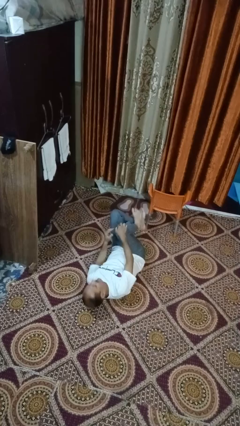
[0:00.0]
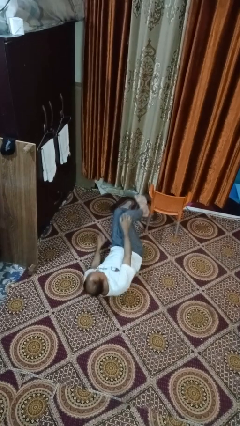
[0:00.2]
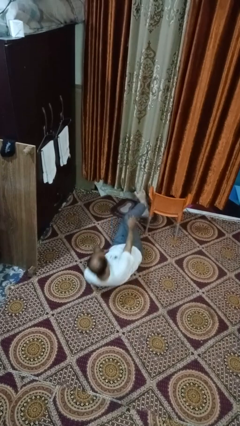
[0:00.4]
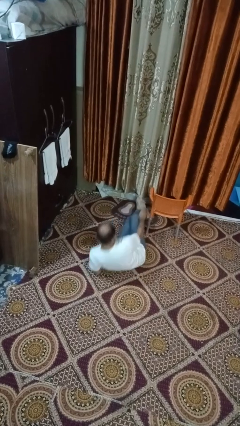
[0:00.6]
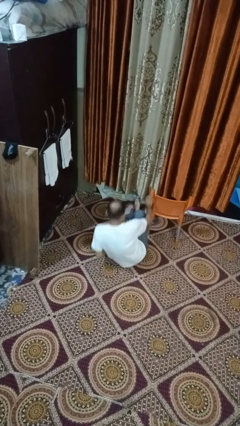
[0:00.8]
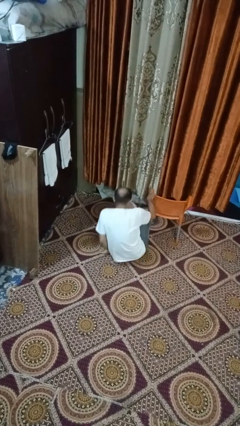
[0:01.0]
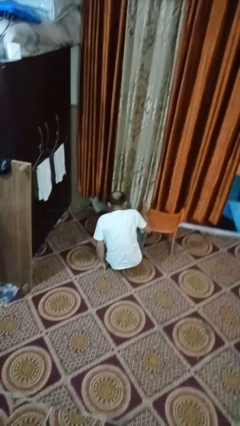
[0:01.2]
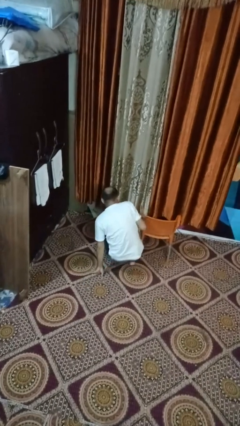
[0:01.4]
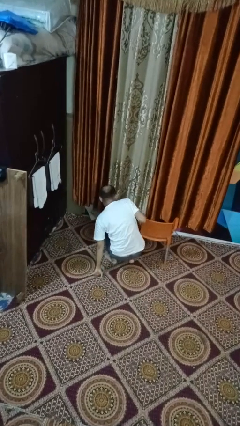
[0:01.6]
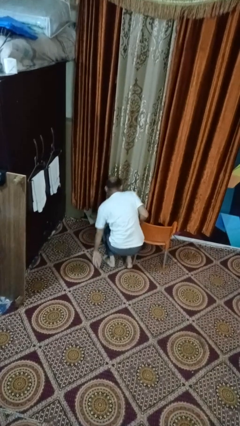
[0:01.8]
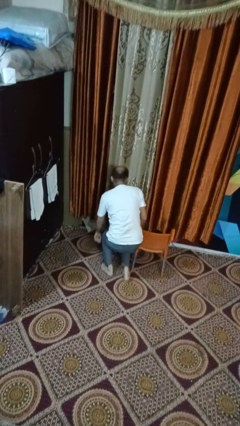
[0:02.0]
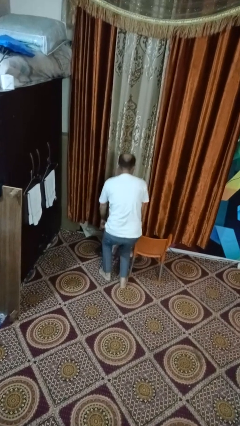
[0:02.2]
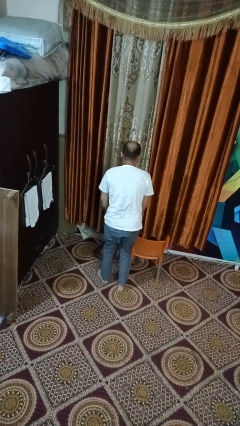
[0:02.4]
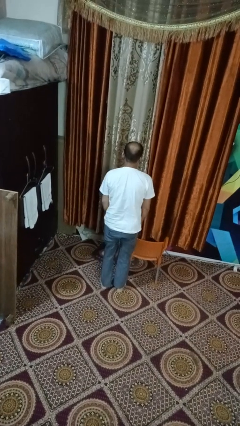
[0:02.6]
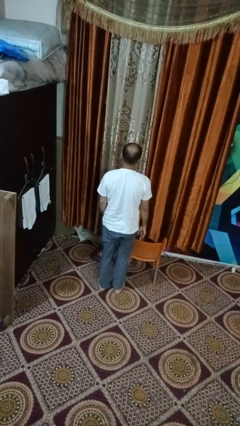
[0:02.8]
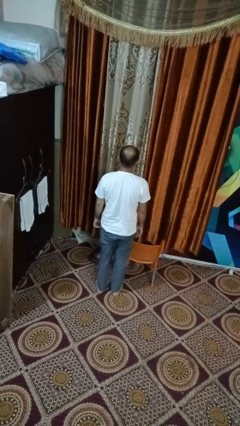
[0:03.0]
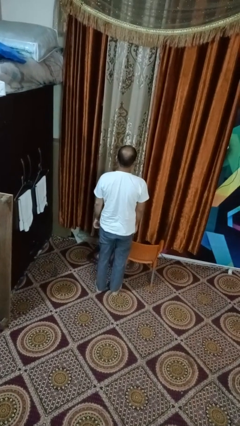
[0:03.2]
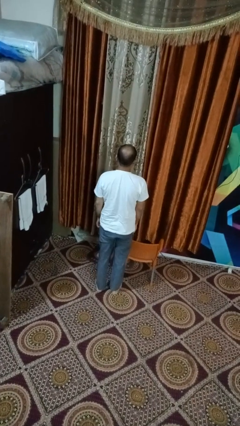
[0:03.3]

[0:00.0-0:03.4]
person stands up from floor

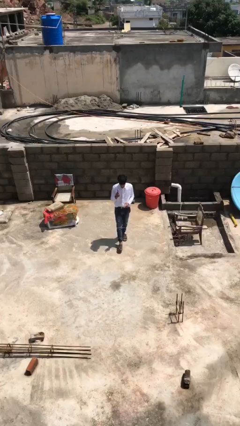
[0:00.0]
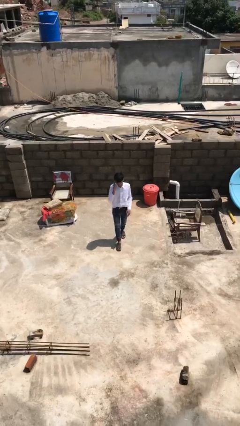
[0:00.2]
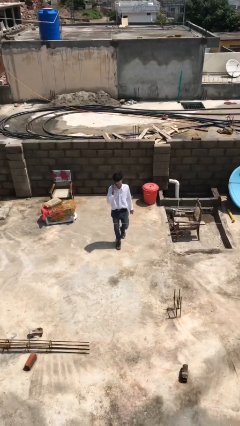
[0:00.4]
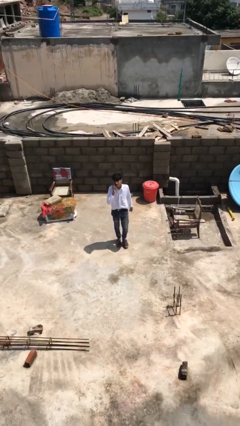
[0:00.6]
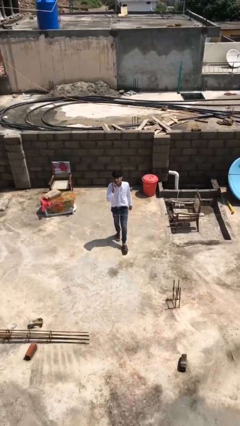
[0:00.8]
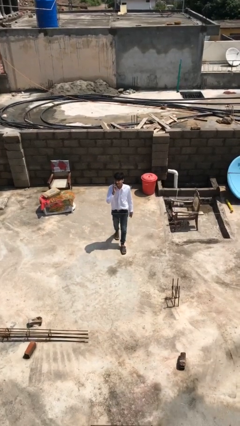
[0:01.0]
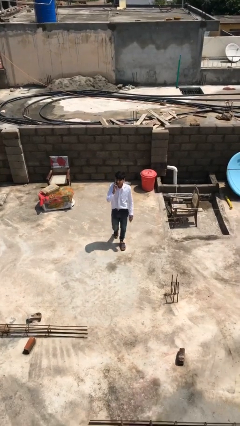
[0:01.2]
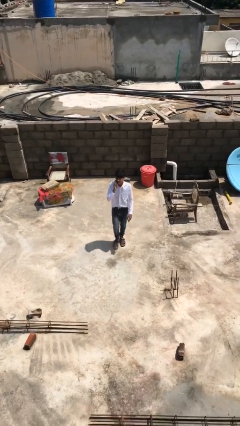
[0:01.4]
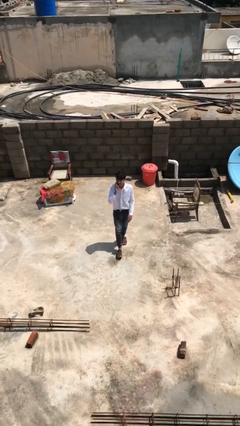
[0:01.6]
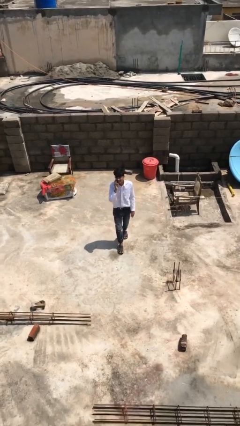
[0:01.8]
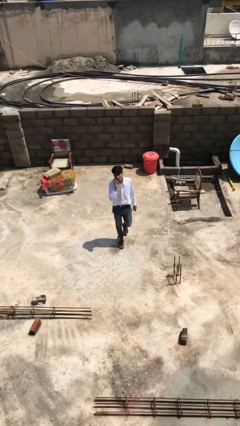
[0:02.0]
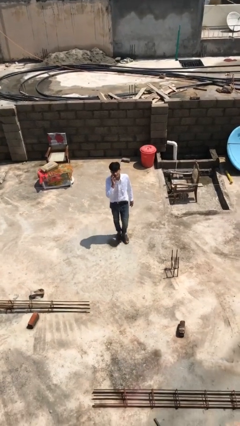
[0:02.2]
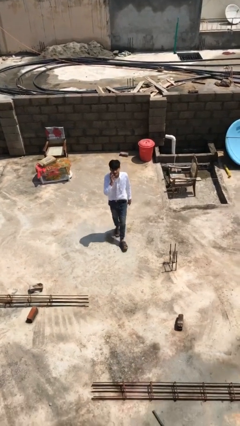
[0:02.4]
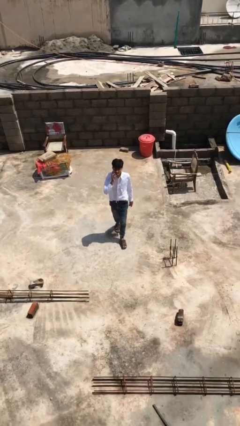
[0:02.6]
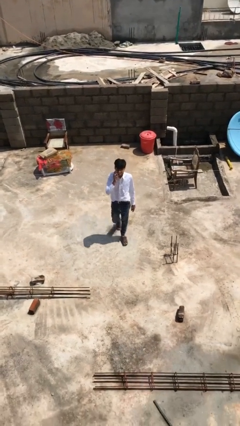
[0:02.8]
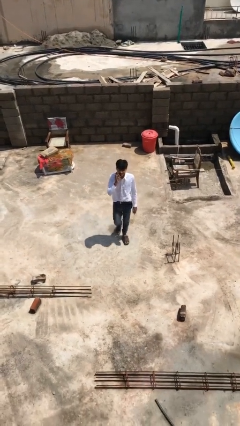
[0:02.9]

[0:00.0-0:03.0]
person talks on phone

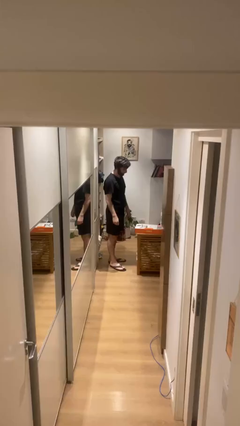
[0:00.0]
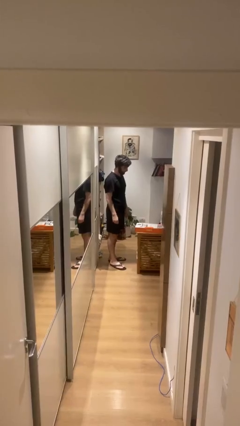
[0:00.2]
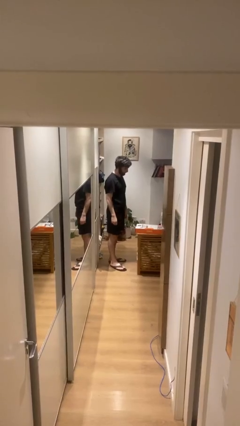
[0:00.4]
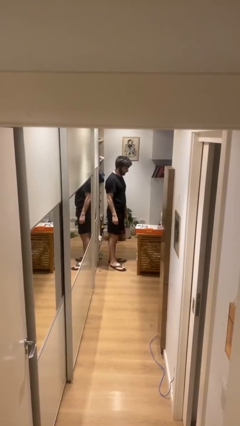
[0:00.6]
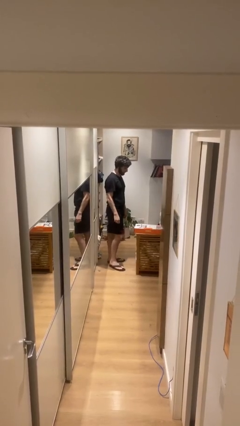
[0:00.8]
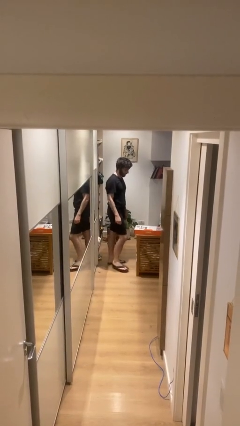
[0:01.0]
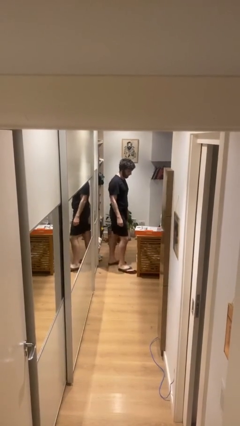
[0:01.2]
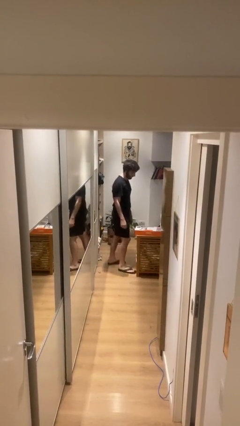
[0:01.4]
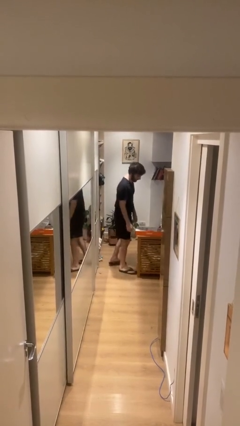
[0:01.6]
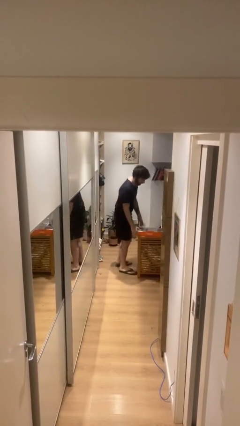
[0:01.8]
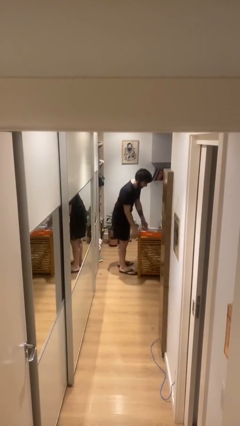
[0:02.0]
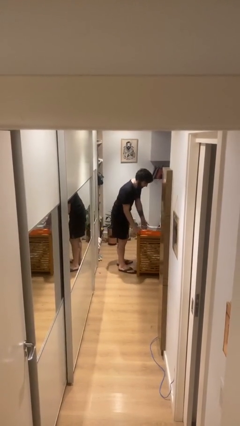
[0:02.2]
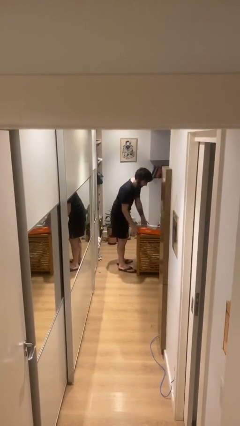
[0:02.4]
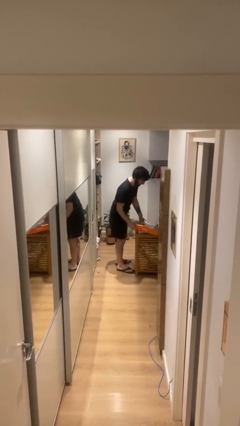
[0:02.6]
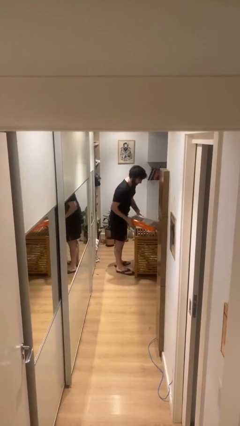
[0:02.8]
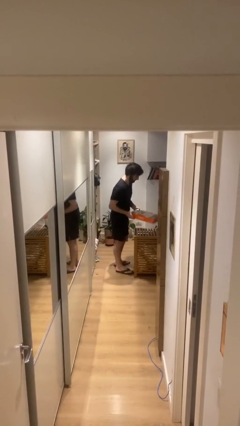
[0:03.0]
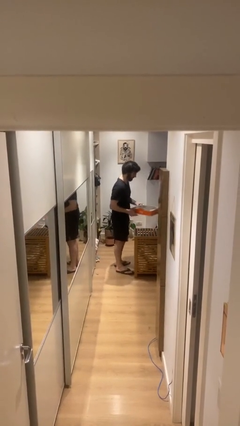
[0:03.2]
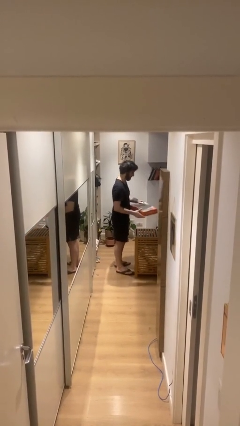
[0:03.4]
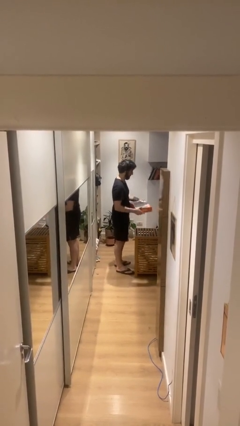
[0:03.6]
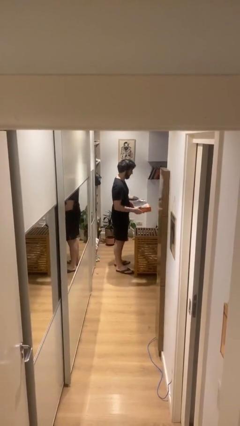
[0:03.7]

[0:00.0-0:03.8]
person picks up object from table

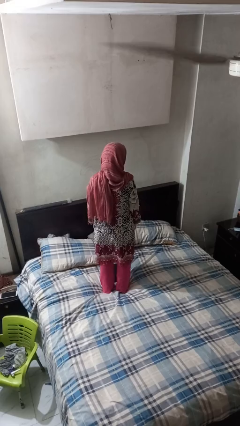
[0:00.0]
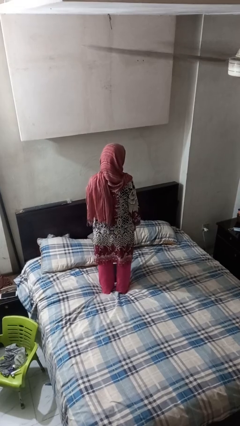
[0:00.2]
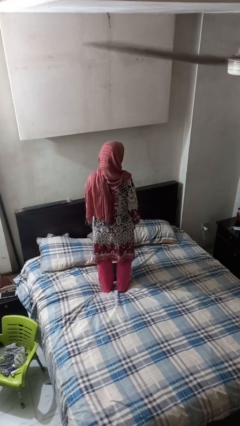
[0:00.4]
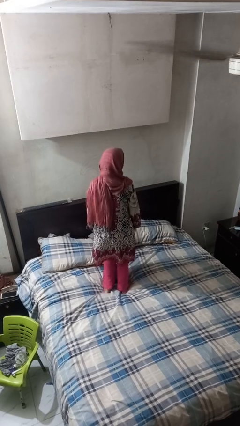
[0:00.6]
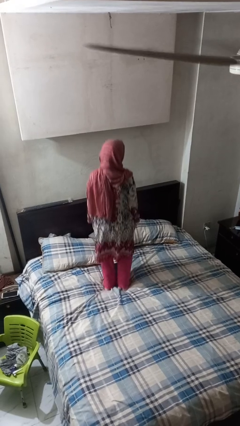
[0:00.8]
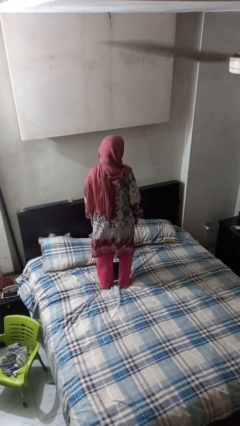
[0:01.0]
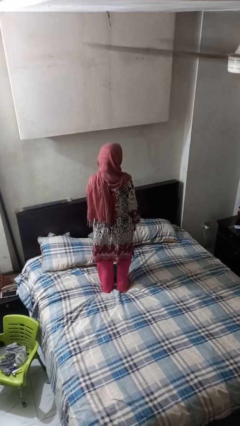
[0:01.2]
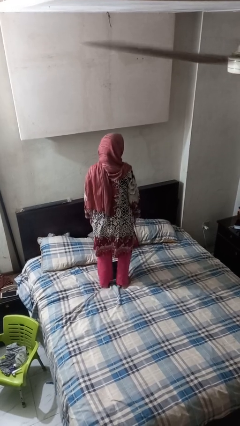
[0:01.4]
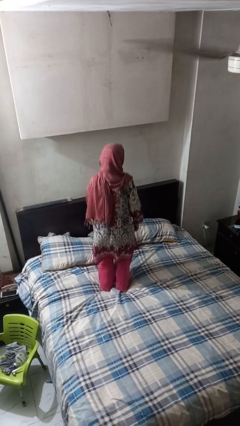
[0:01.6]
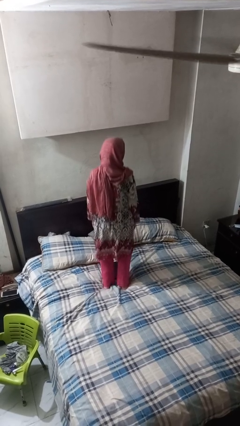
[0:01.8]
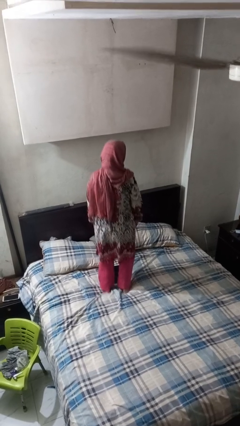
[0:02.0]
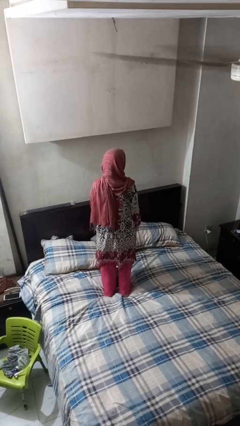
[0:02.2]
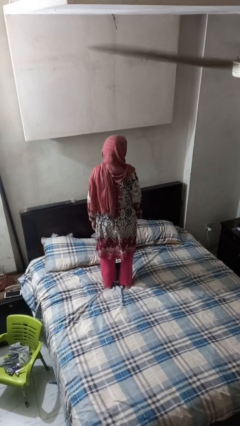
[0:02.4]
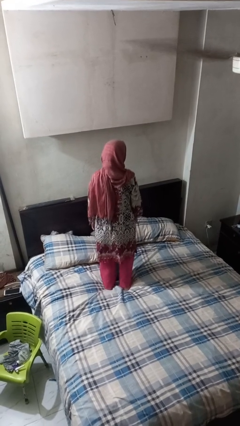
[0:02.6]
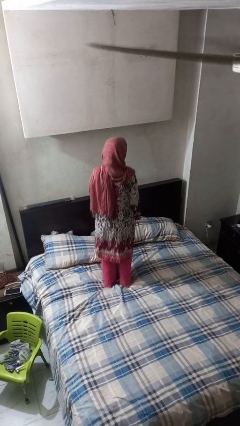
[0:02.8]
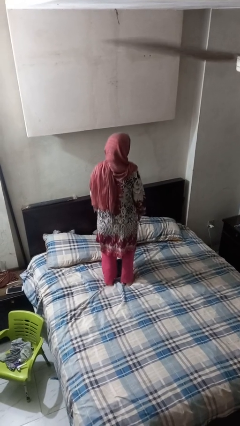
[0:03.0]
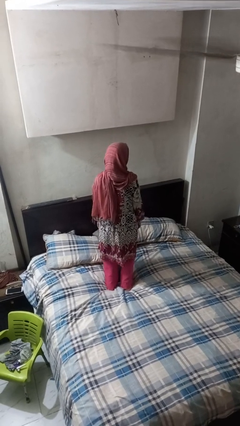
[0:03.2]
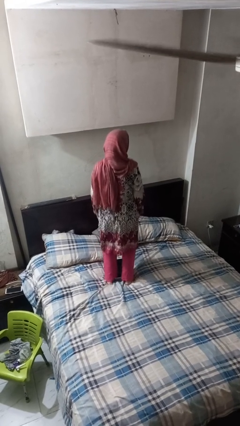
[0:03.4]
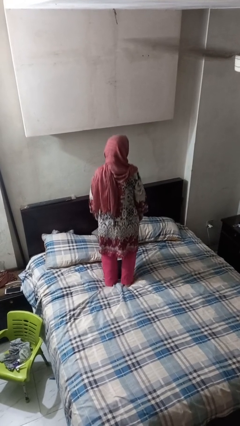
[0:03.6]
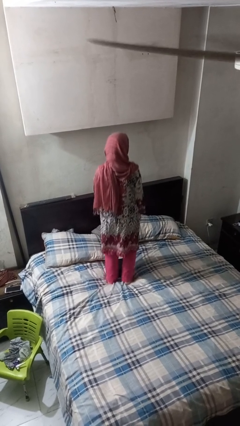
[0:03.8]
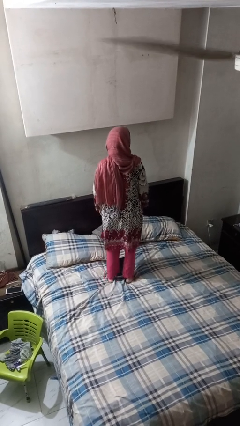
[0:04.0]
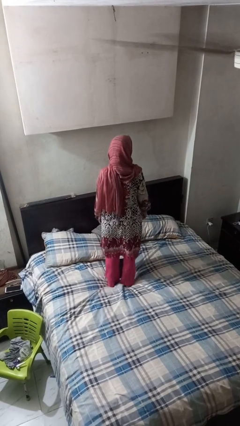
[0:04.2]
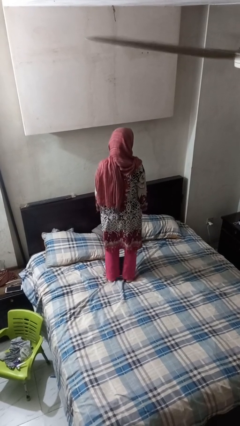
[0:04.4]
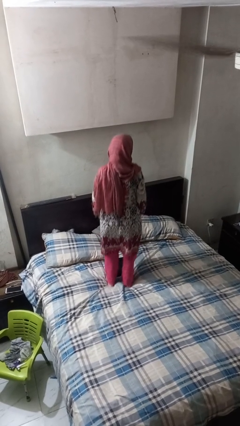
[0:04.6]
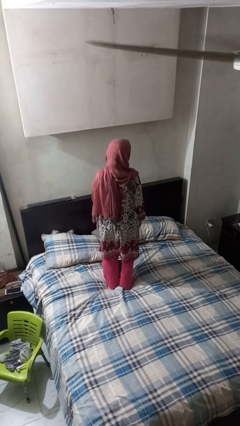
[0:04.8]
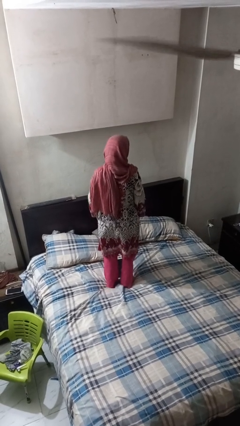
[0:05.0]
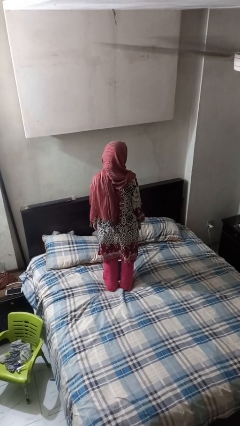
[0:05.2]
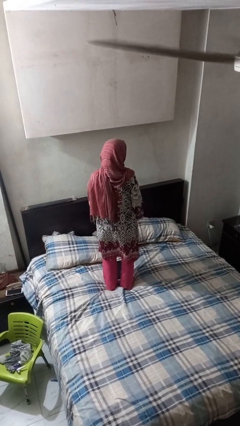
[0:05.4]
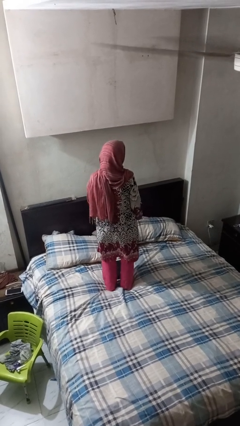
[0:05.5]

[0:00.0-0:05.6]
person jumps on bed

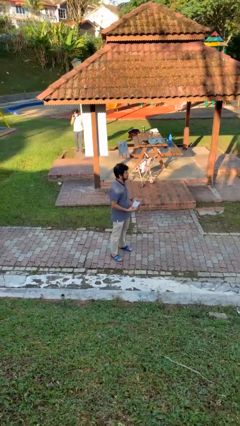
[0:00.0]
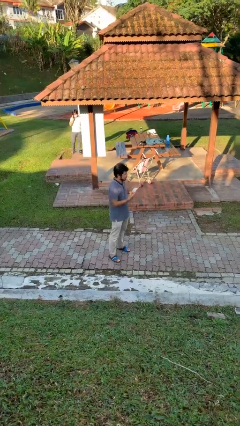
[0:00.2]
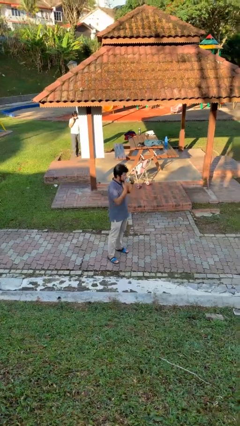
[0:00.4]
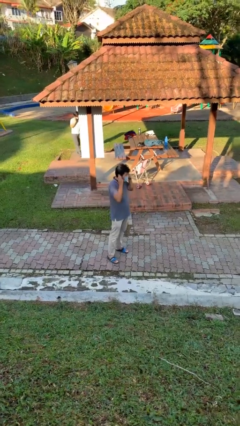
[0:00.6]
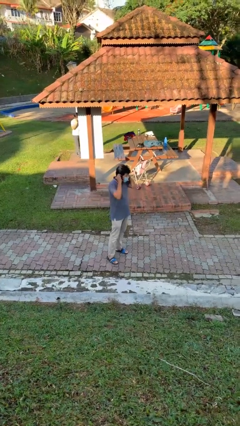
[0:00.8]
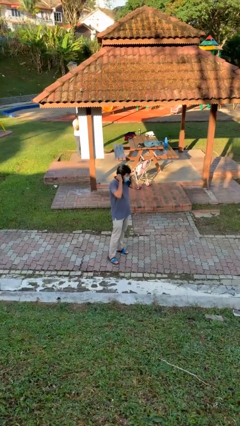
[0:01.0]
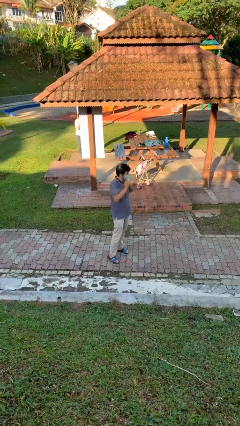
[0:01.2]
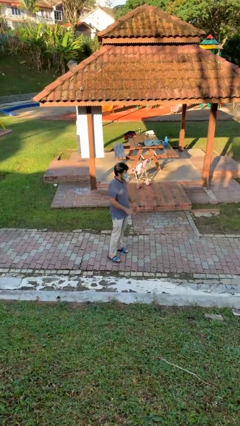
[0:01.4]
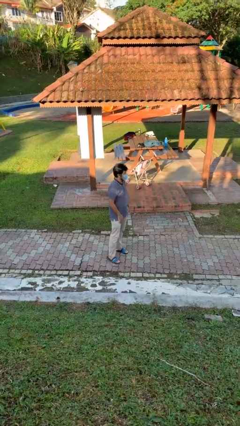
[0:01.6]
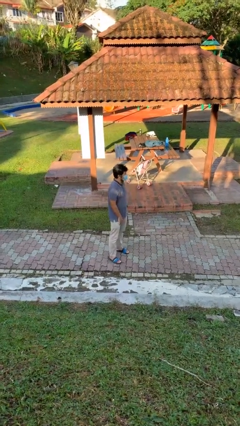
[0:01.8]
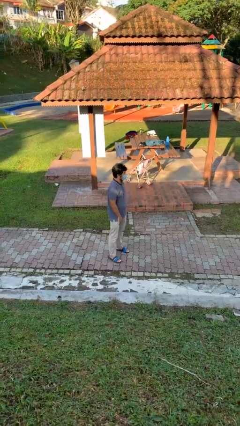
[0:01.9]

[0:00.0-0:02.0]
person puts on facemask
